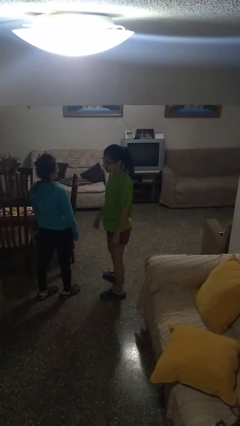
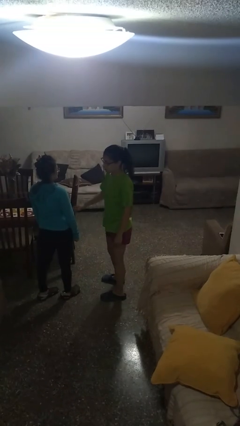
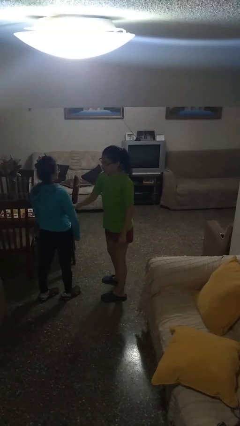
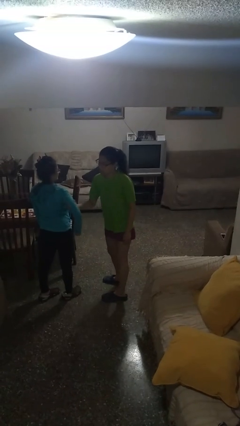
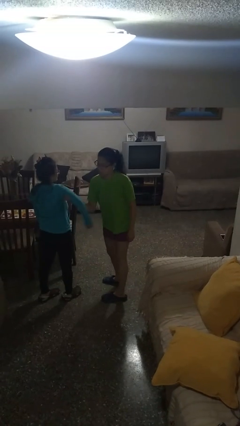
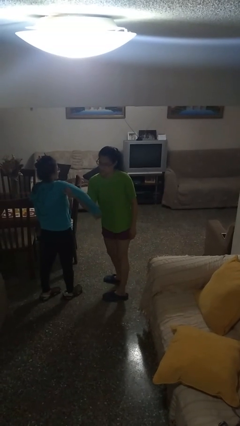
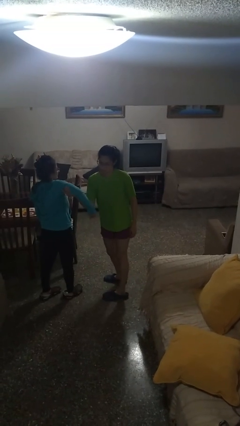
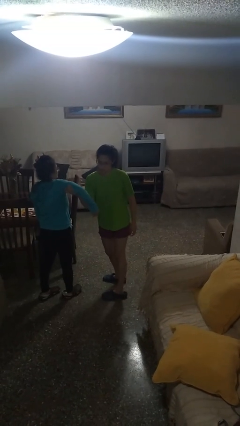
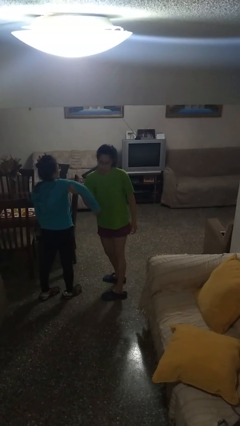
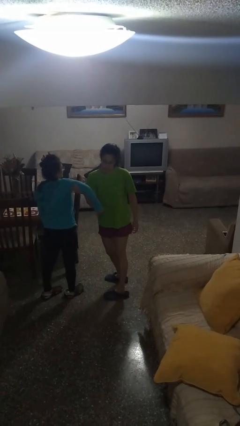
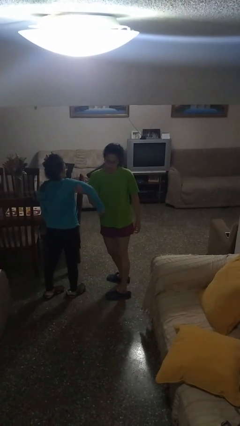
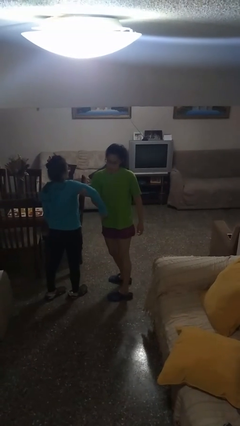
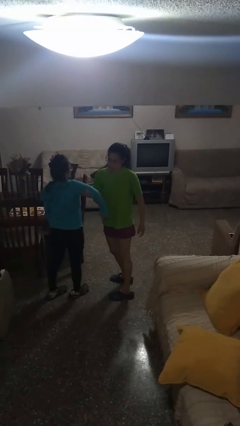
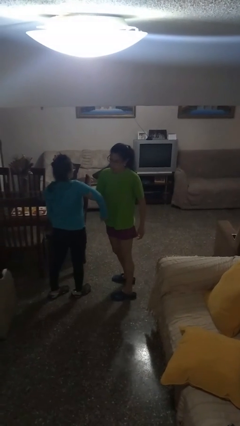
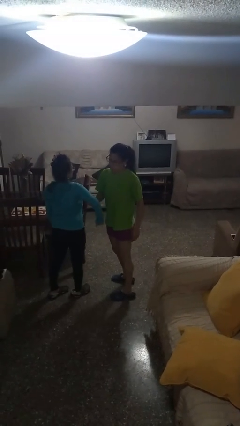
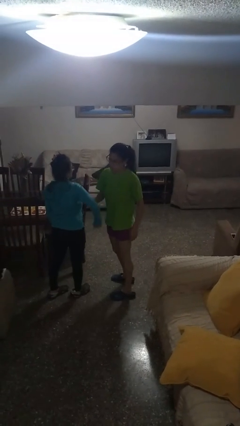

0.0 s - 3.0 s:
person grabs person by bicep

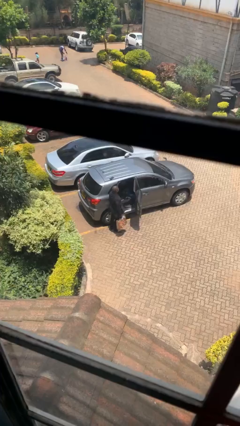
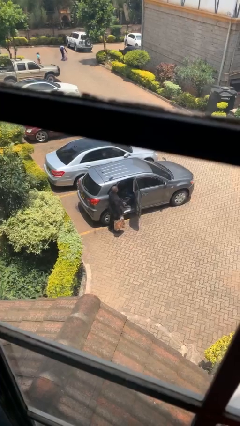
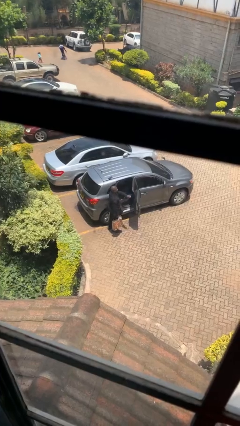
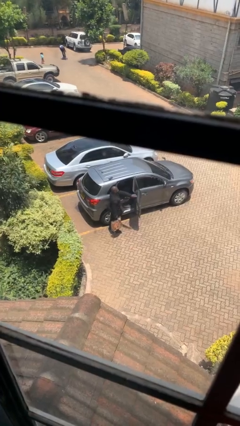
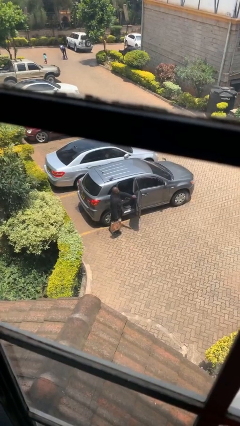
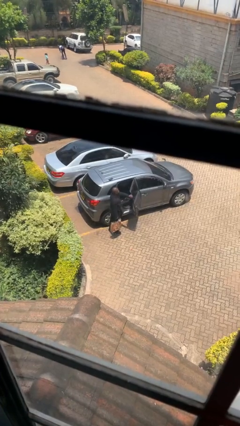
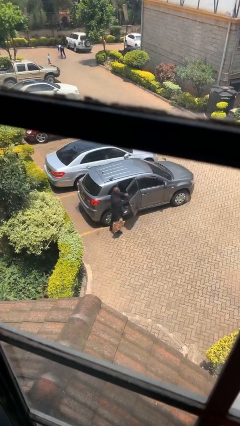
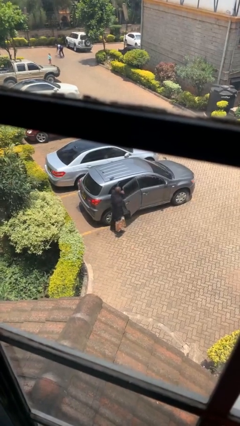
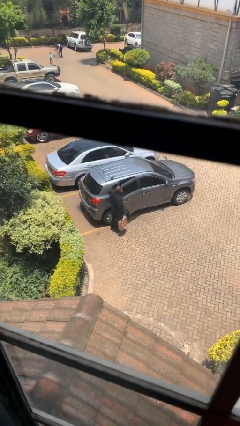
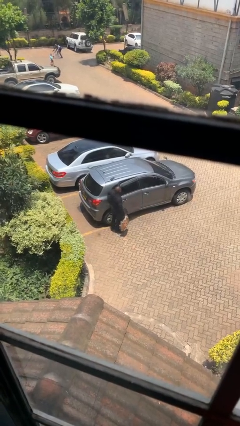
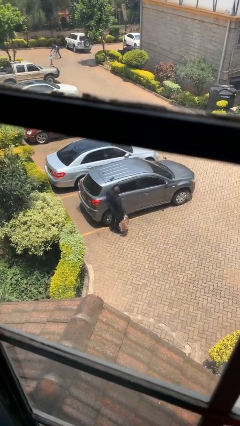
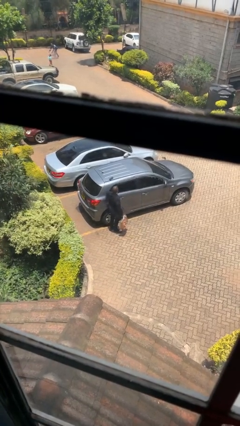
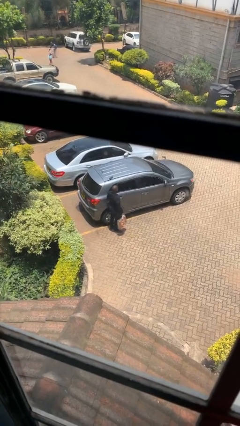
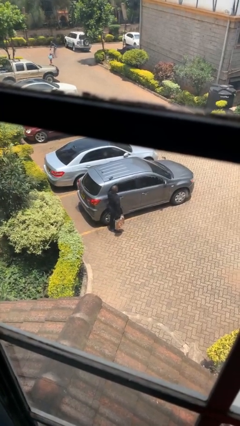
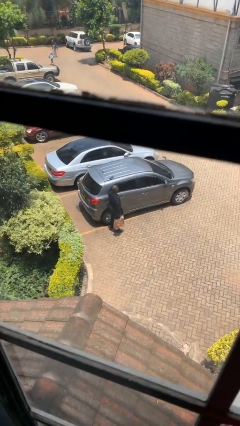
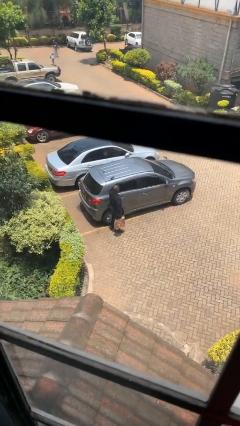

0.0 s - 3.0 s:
person closes car door

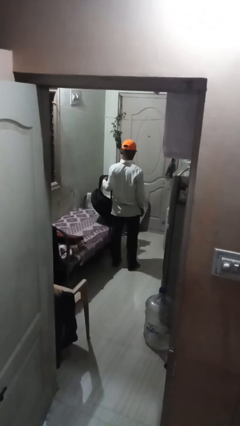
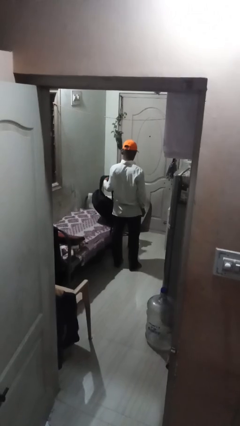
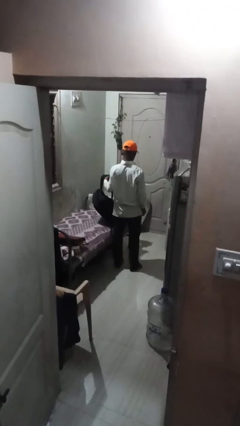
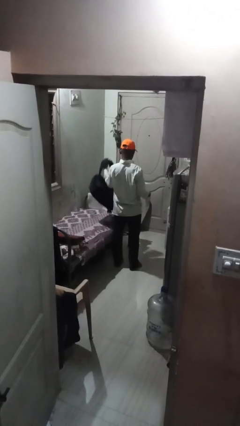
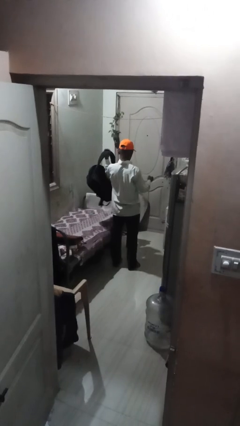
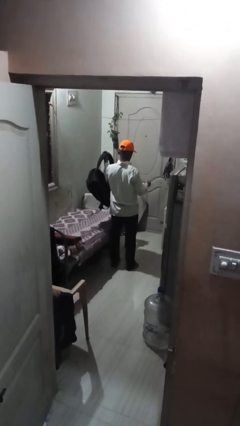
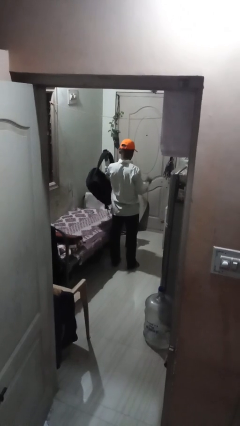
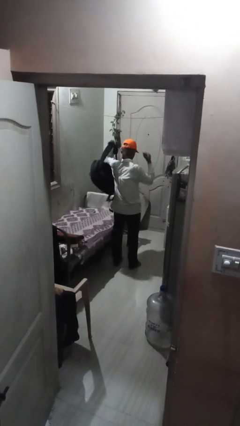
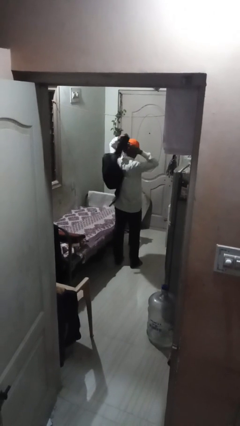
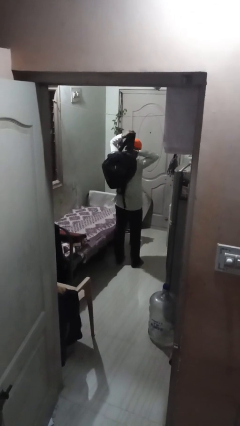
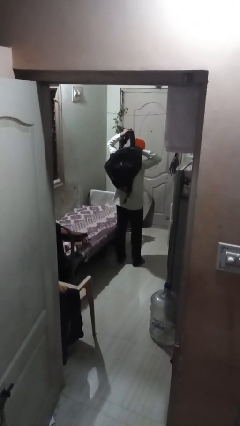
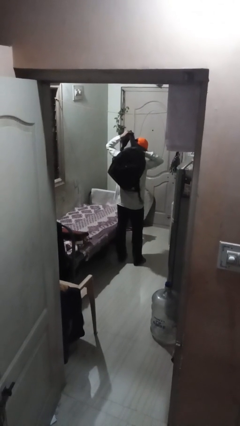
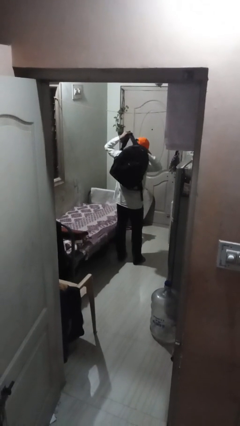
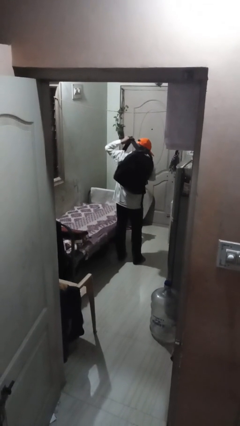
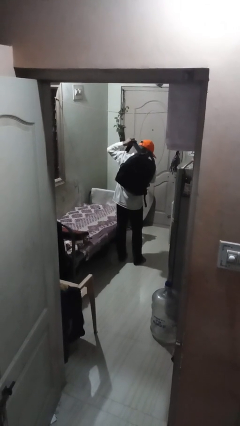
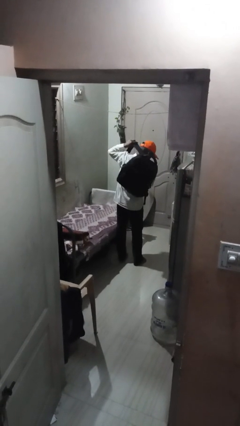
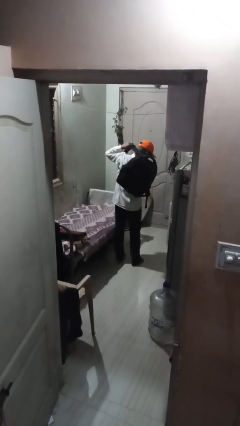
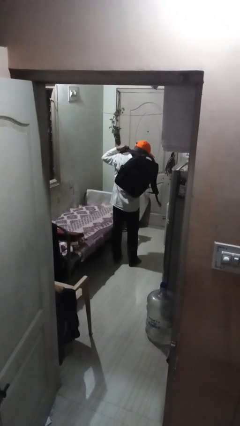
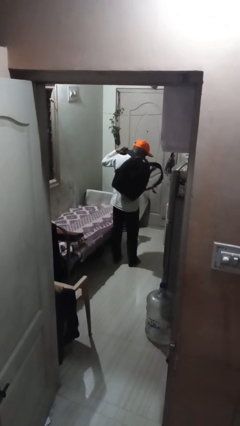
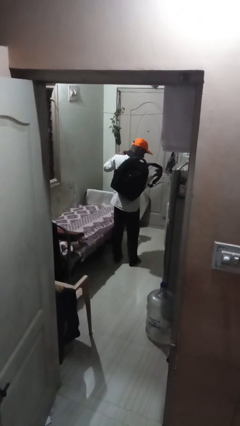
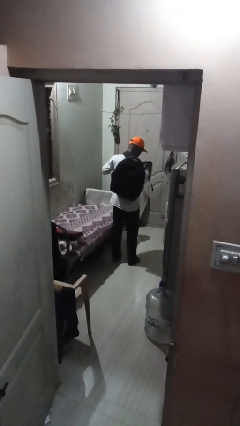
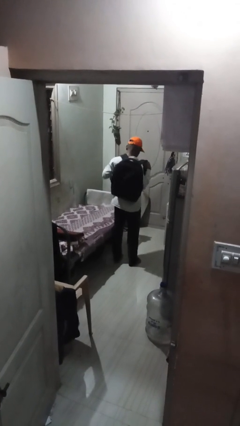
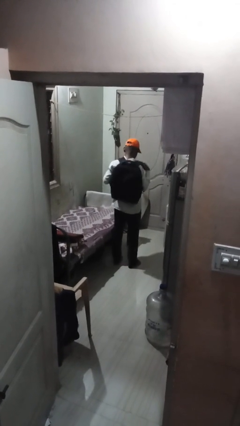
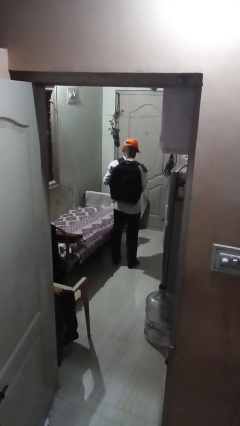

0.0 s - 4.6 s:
person puts on backpack

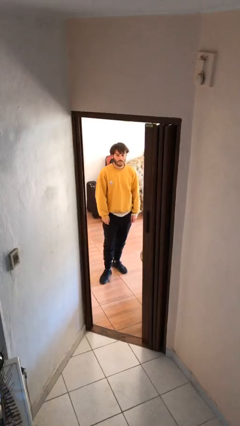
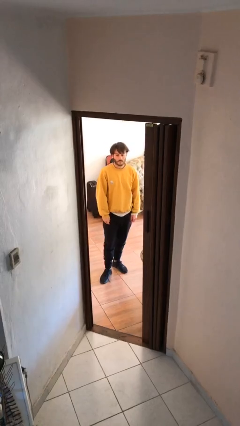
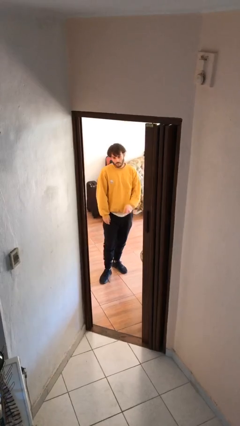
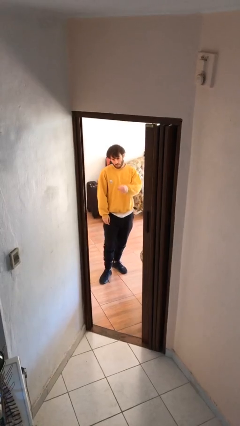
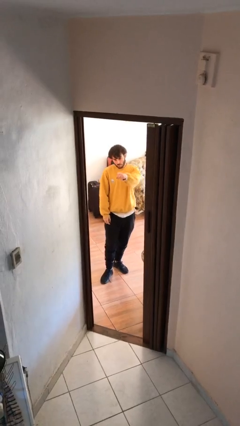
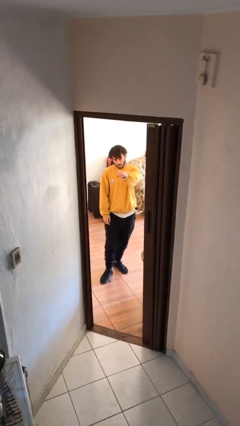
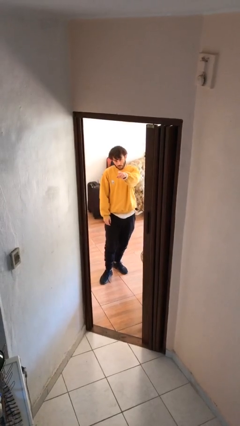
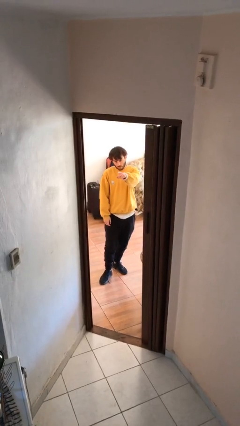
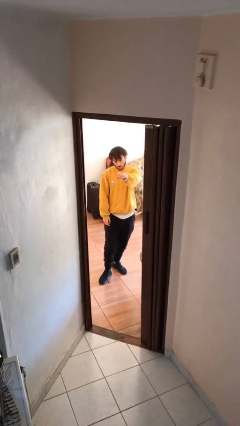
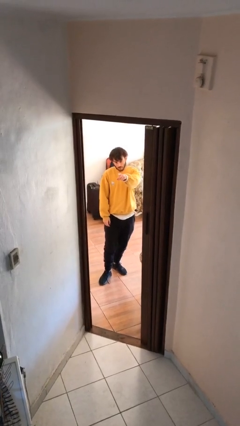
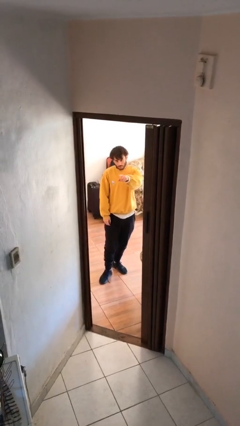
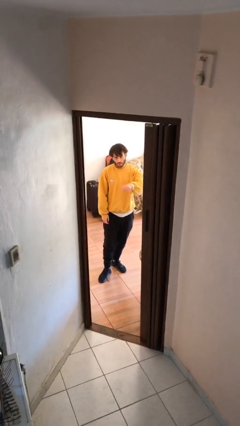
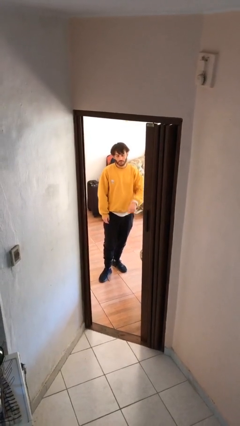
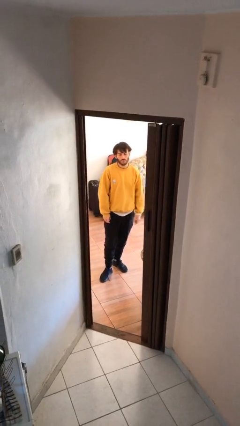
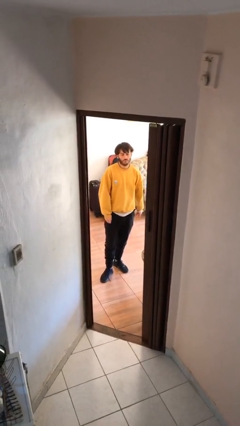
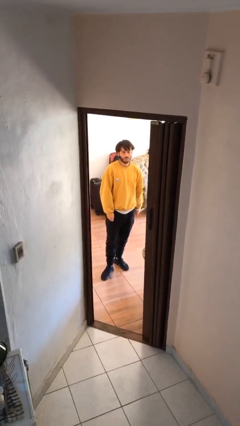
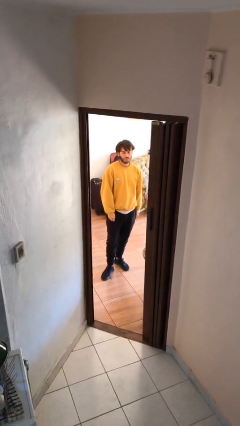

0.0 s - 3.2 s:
person points at person

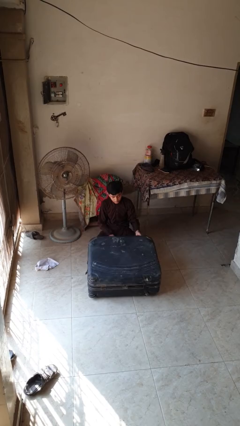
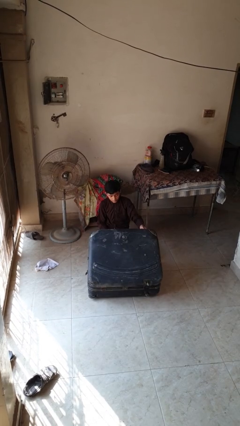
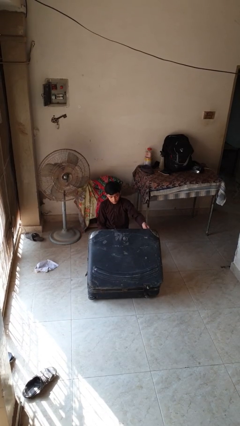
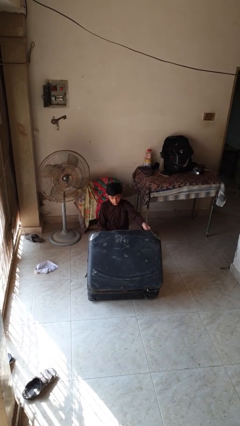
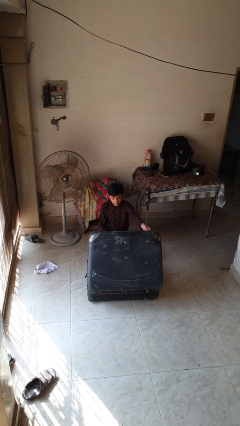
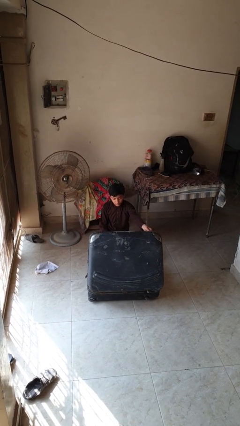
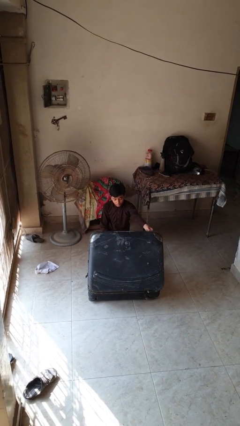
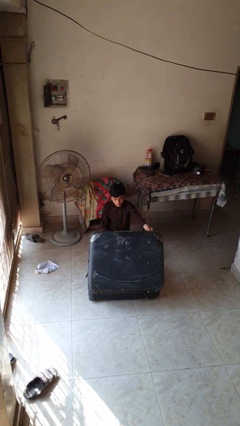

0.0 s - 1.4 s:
person opens suitcase

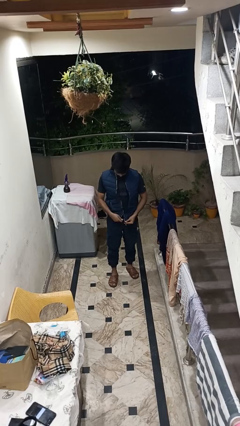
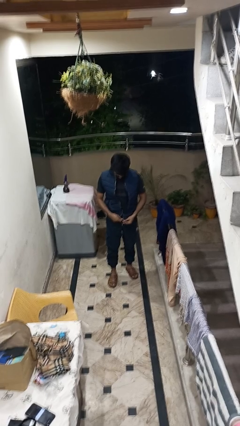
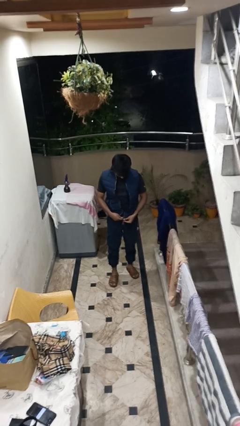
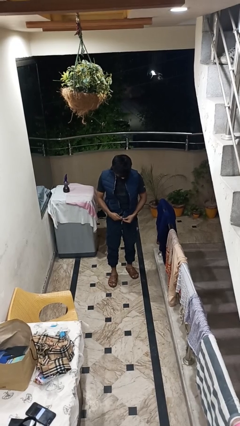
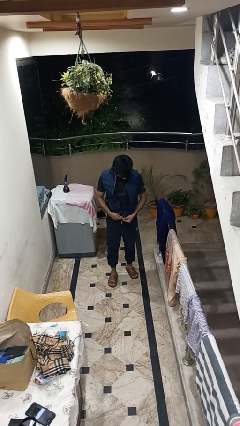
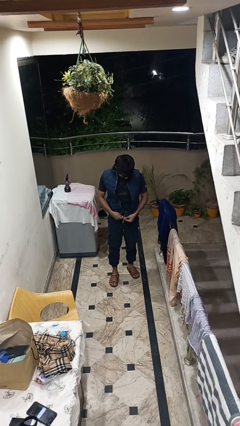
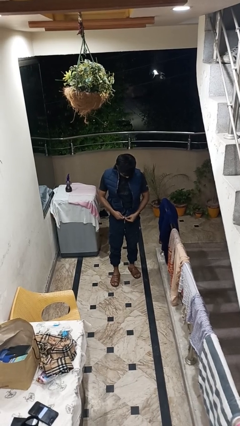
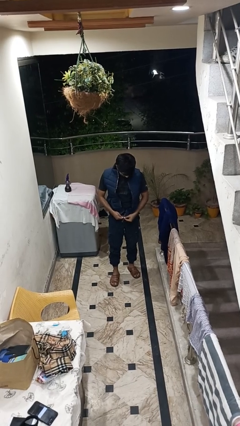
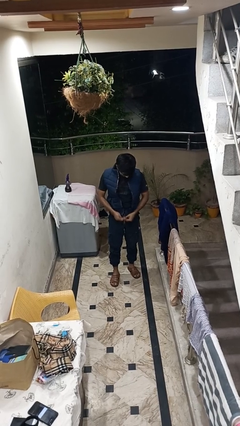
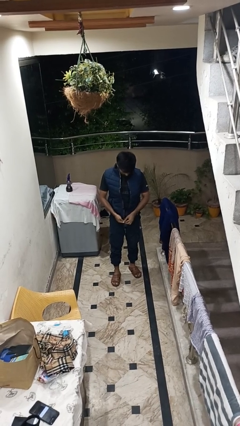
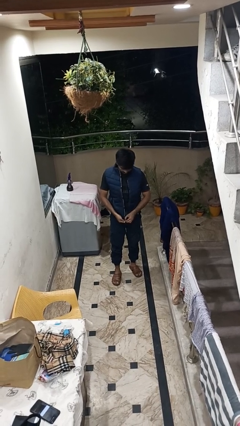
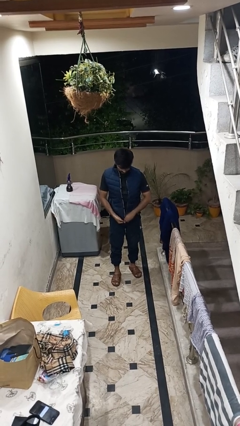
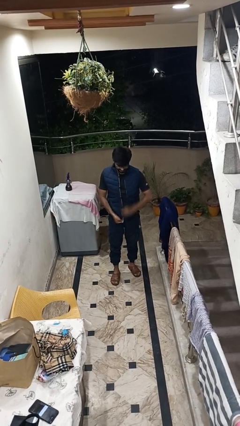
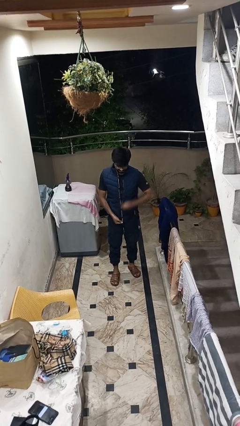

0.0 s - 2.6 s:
person zips up jacket
